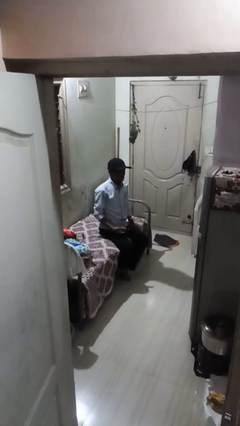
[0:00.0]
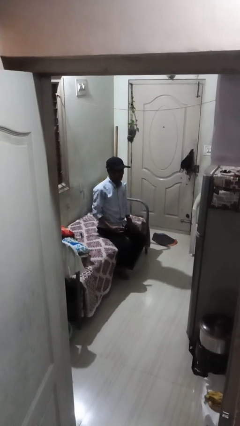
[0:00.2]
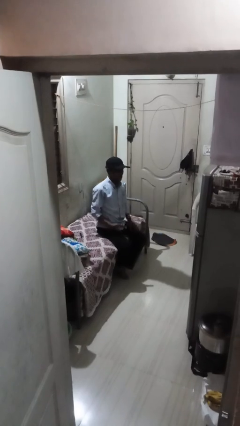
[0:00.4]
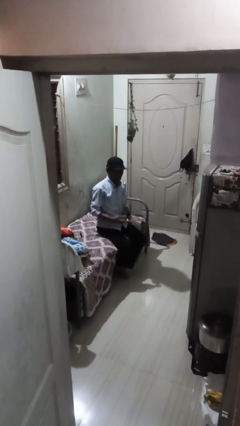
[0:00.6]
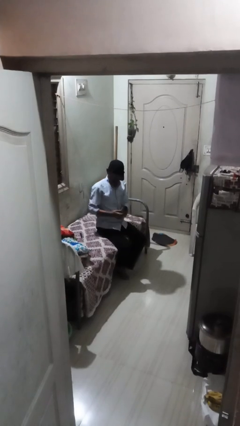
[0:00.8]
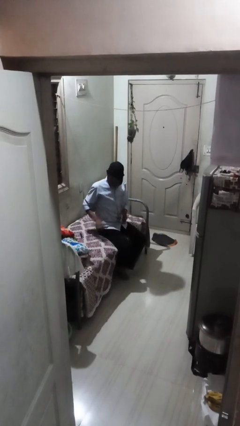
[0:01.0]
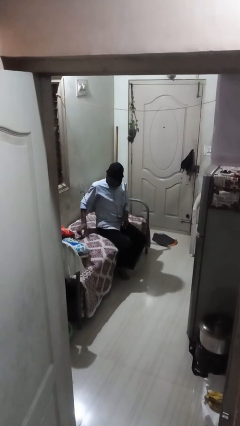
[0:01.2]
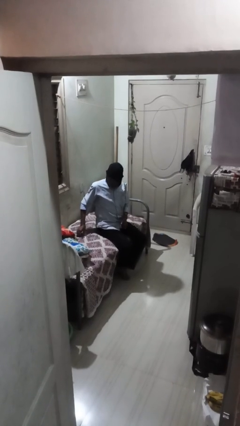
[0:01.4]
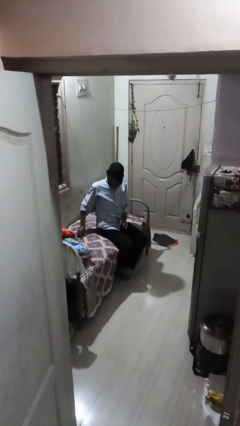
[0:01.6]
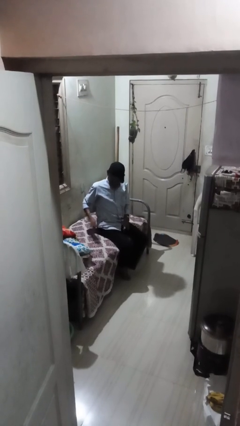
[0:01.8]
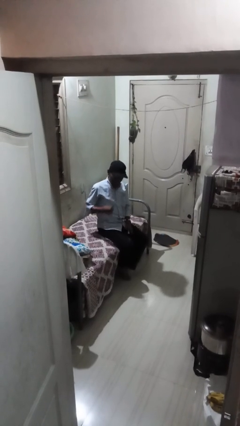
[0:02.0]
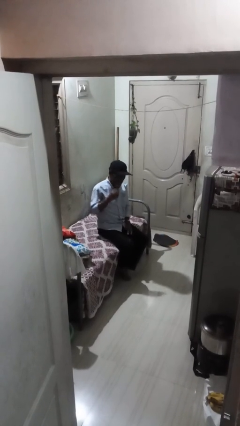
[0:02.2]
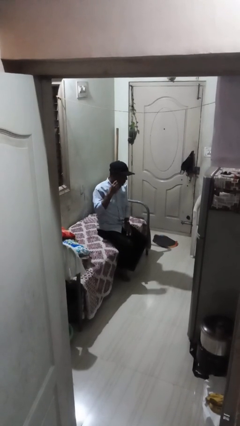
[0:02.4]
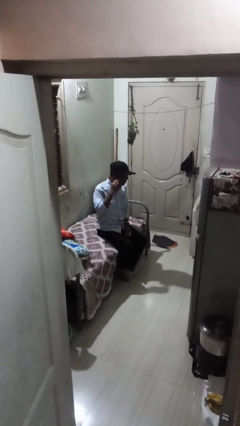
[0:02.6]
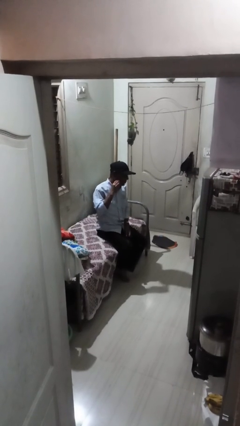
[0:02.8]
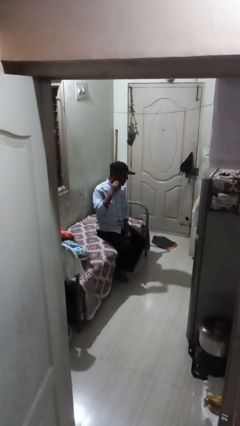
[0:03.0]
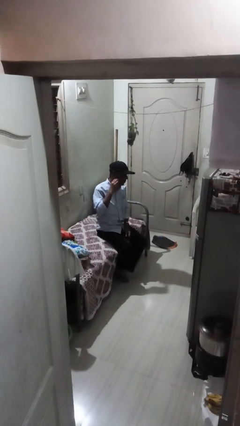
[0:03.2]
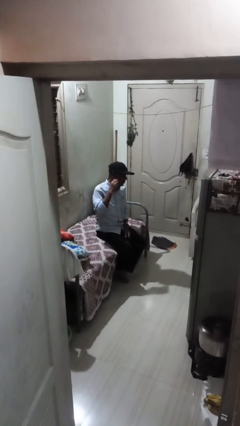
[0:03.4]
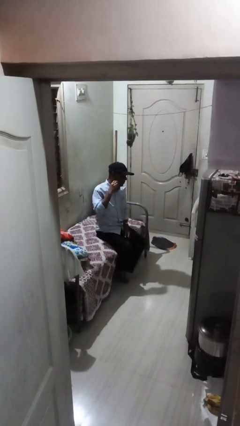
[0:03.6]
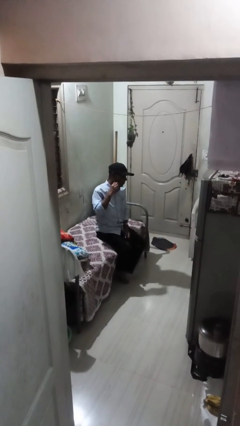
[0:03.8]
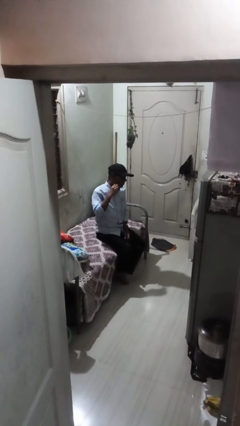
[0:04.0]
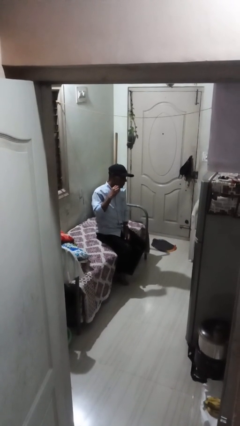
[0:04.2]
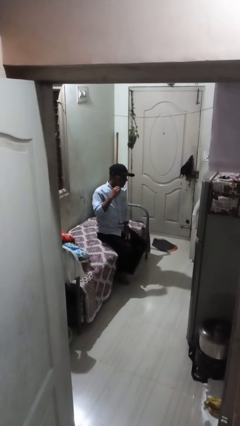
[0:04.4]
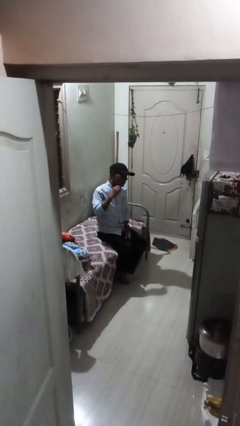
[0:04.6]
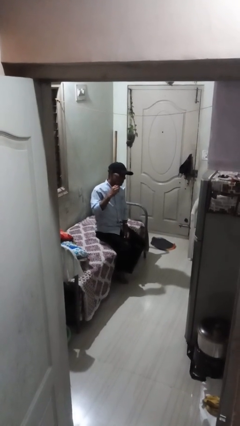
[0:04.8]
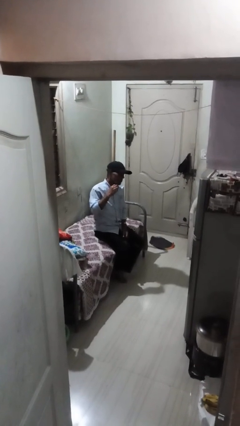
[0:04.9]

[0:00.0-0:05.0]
person shaves face

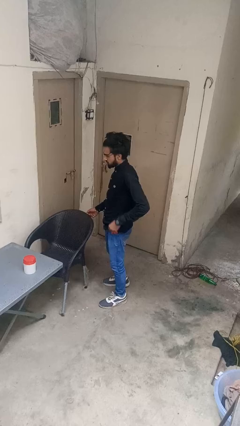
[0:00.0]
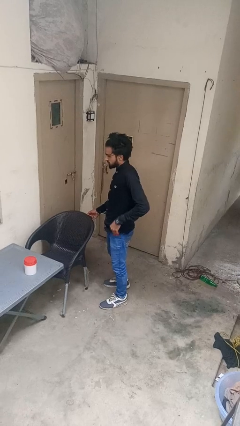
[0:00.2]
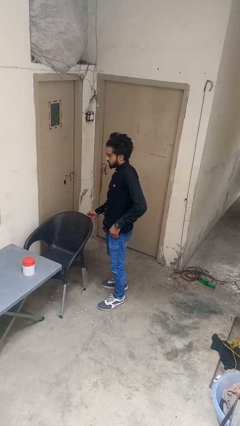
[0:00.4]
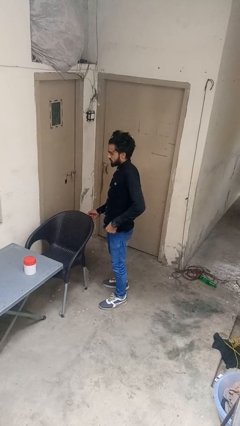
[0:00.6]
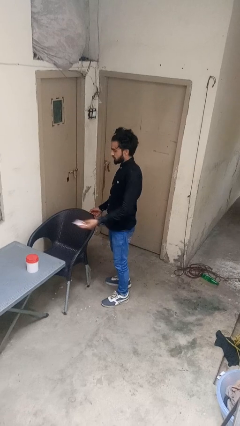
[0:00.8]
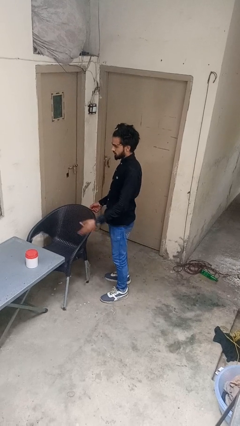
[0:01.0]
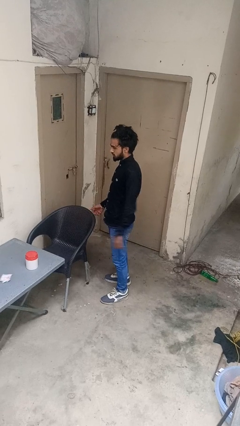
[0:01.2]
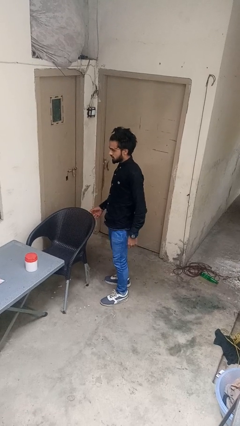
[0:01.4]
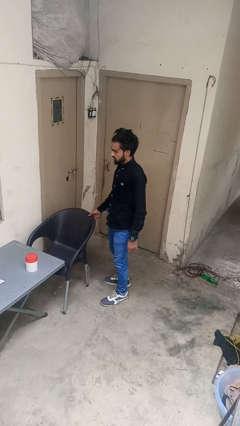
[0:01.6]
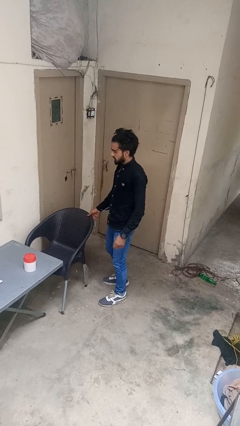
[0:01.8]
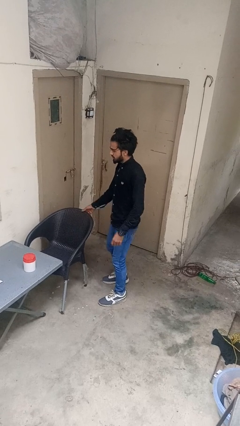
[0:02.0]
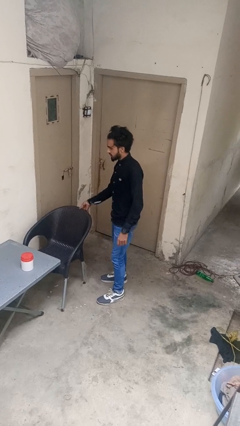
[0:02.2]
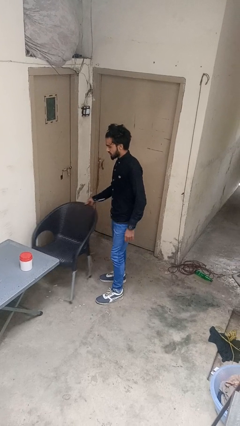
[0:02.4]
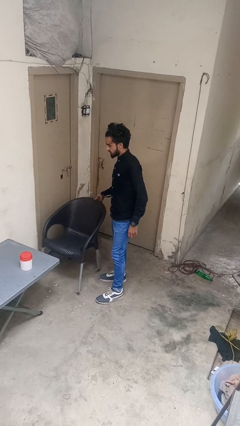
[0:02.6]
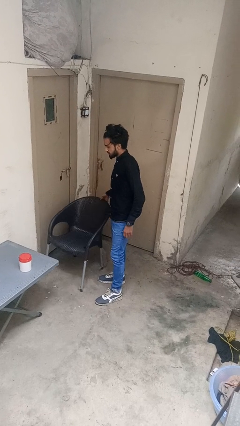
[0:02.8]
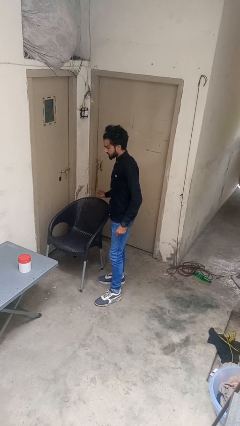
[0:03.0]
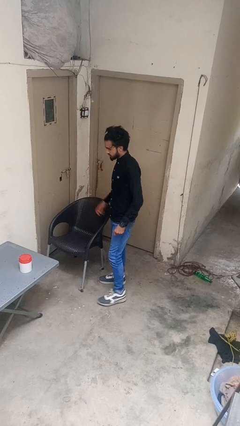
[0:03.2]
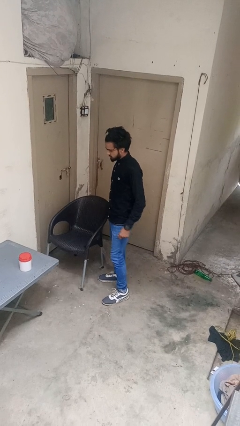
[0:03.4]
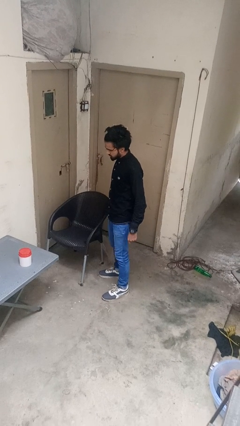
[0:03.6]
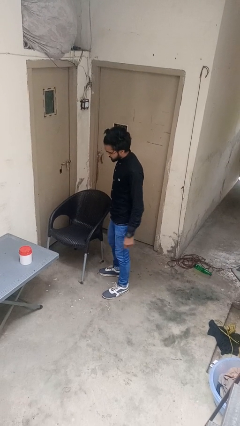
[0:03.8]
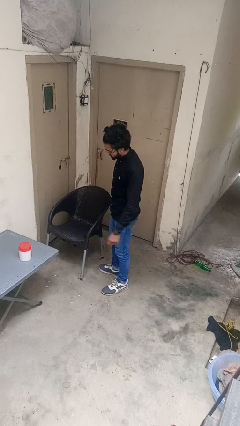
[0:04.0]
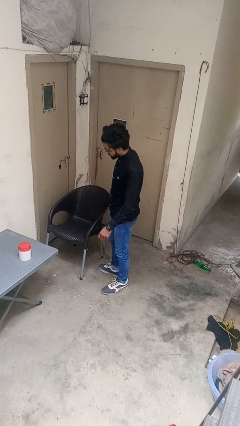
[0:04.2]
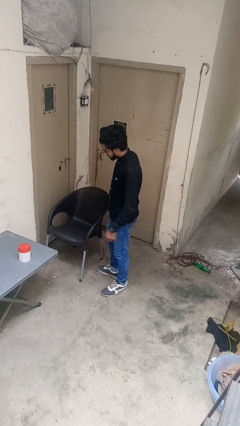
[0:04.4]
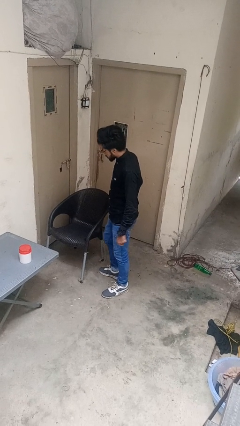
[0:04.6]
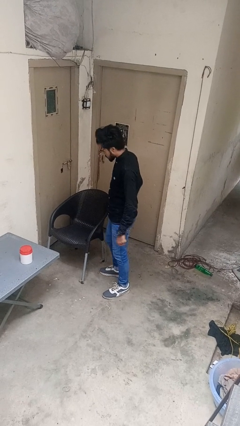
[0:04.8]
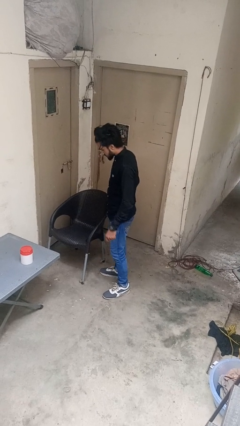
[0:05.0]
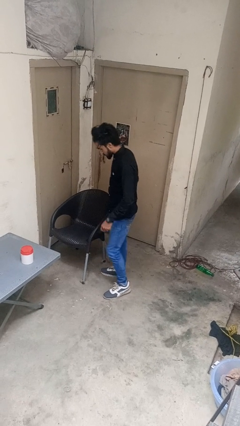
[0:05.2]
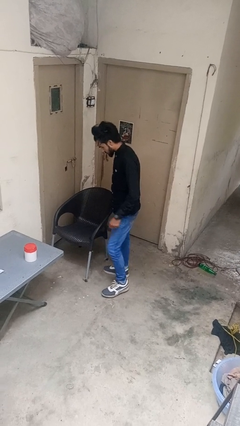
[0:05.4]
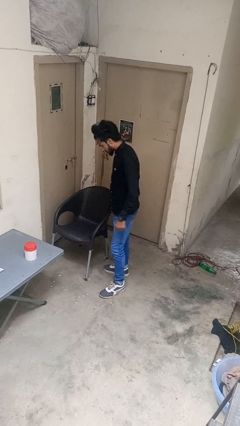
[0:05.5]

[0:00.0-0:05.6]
person pulls out chair

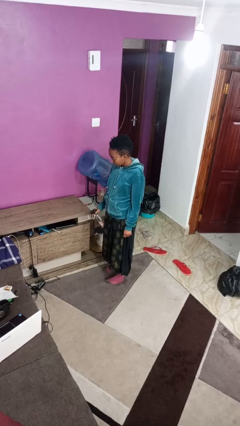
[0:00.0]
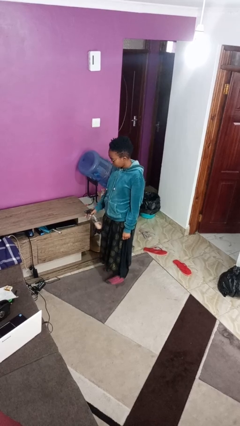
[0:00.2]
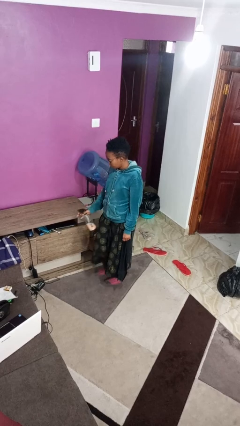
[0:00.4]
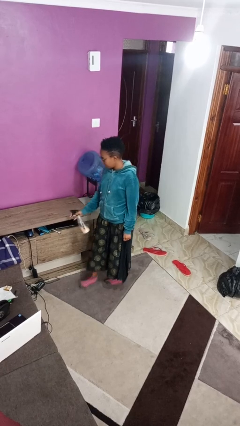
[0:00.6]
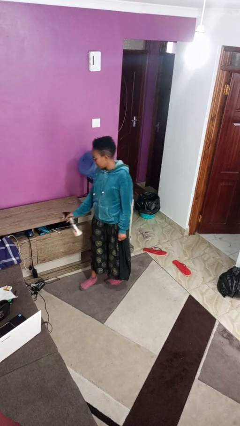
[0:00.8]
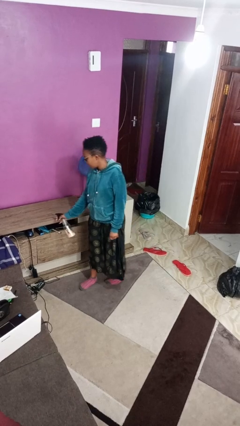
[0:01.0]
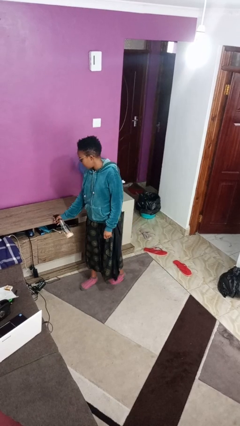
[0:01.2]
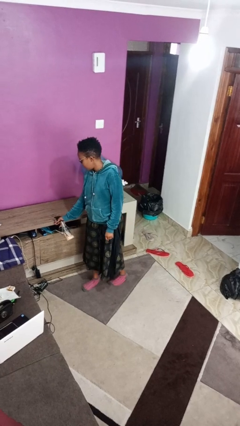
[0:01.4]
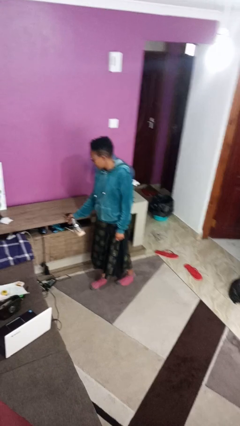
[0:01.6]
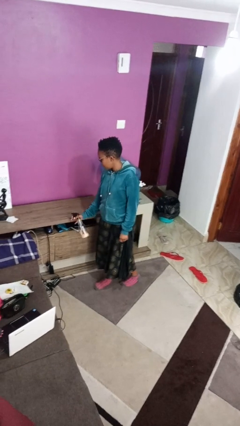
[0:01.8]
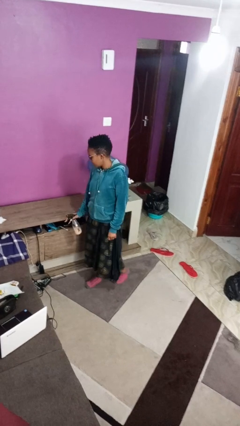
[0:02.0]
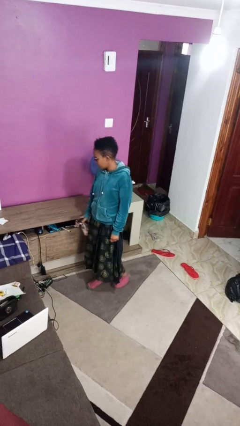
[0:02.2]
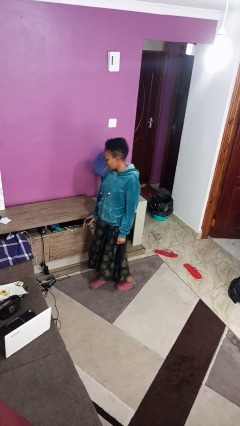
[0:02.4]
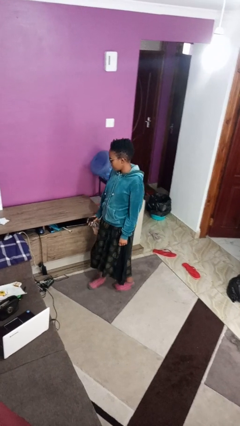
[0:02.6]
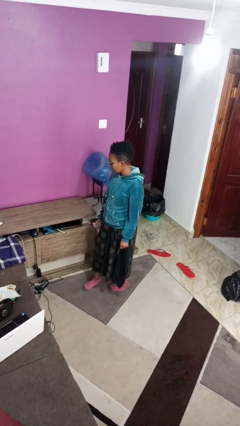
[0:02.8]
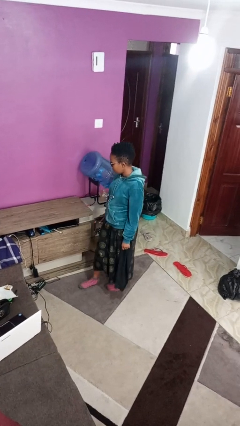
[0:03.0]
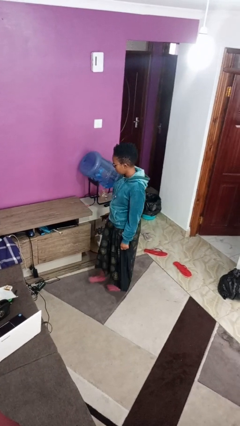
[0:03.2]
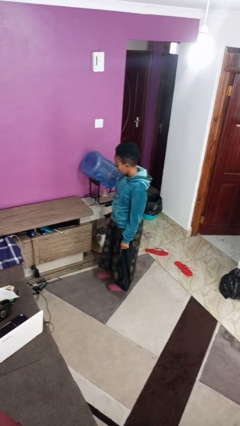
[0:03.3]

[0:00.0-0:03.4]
person sprays from bottle

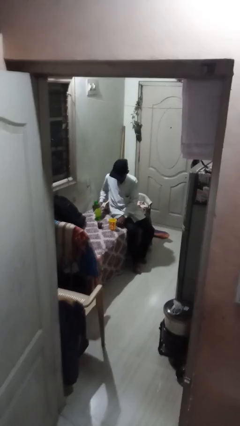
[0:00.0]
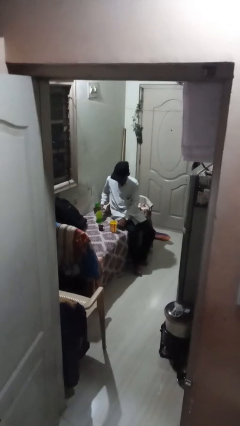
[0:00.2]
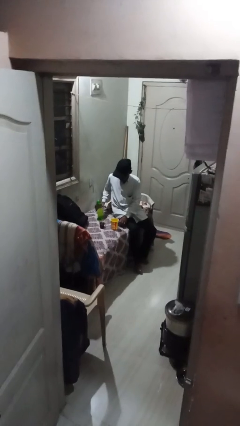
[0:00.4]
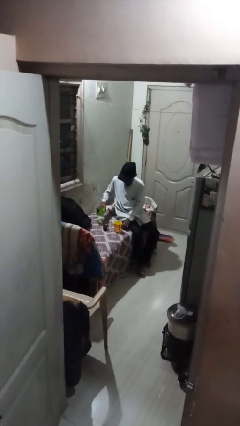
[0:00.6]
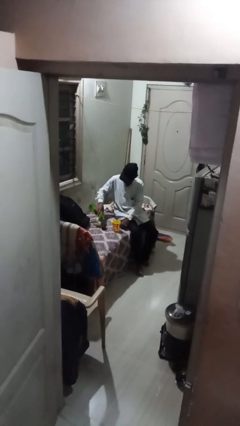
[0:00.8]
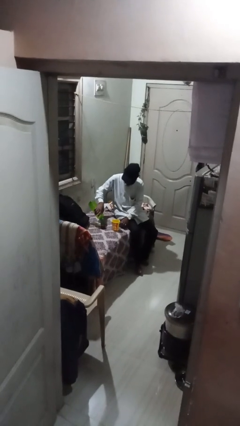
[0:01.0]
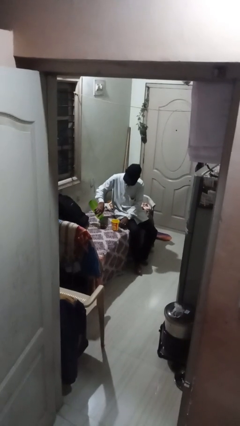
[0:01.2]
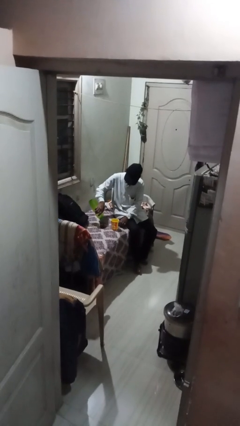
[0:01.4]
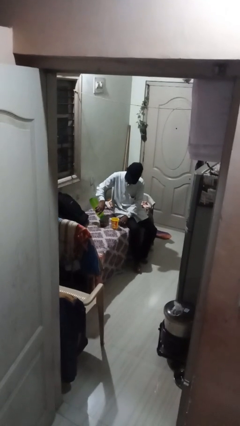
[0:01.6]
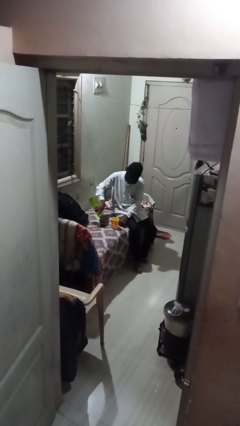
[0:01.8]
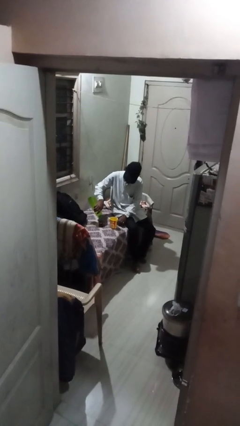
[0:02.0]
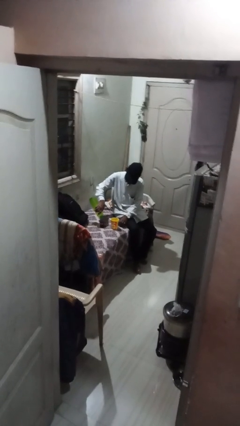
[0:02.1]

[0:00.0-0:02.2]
person pours liquid into cup

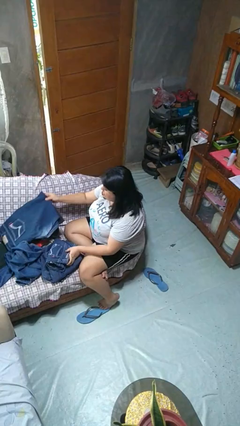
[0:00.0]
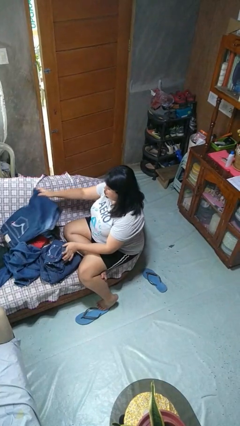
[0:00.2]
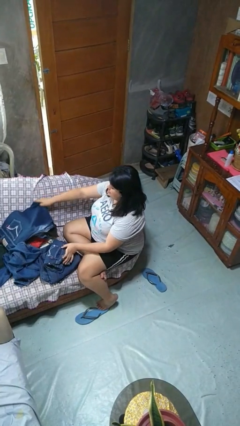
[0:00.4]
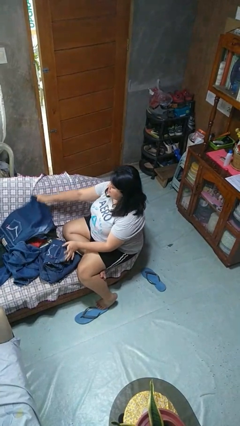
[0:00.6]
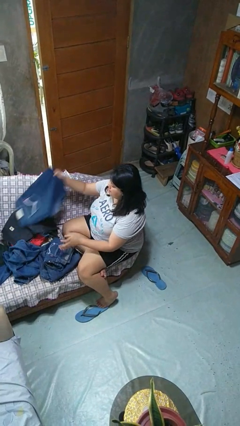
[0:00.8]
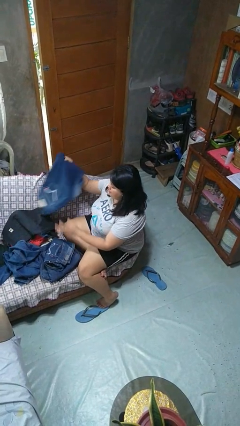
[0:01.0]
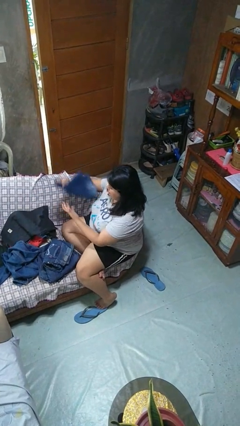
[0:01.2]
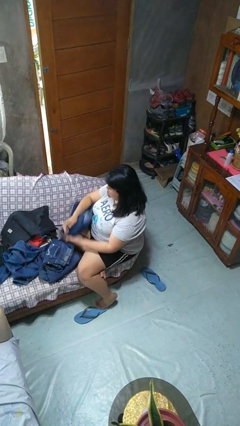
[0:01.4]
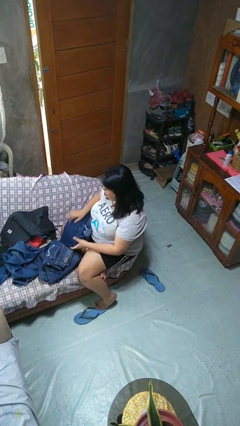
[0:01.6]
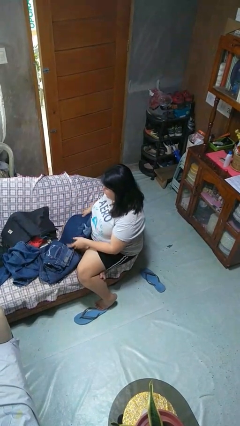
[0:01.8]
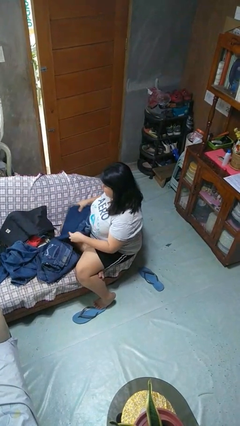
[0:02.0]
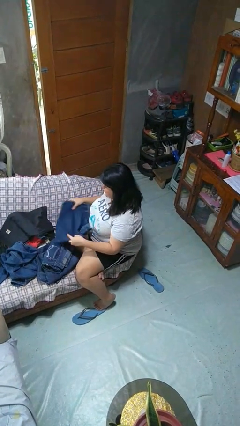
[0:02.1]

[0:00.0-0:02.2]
person folds pants
